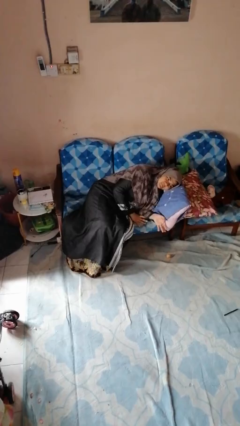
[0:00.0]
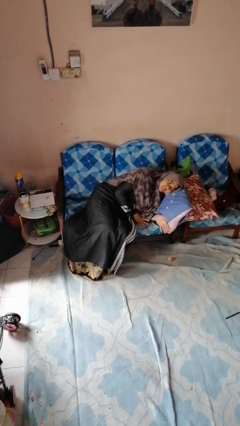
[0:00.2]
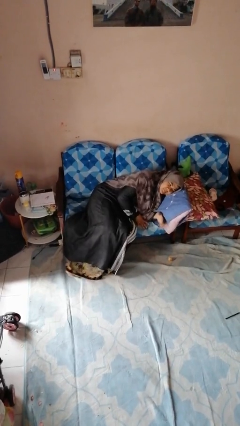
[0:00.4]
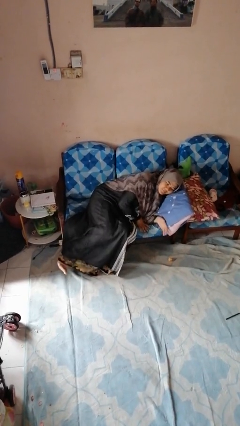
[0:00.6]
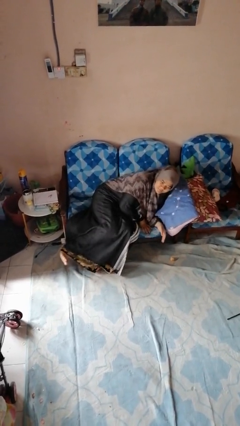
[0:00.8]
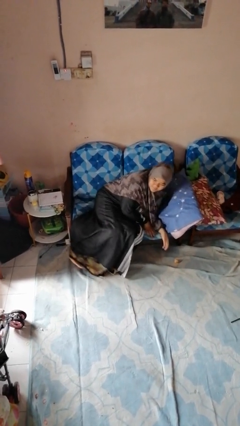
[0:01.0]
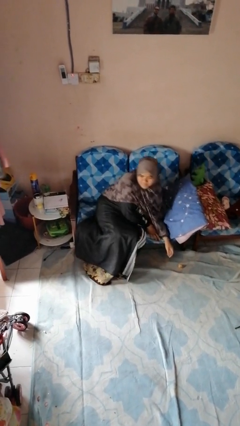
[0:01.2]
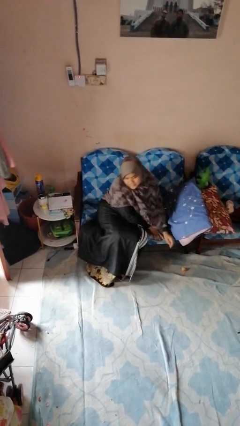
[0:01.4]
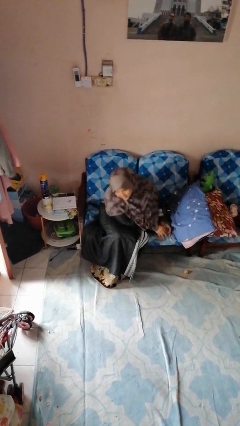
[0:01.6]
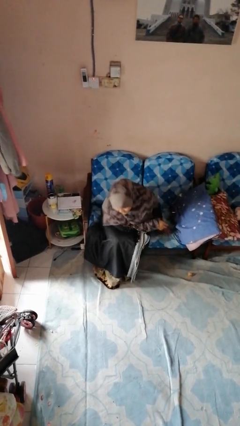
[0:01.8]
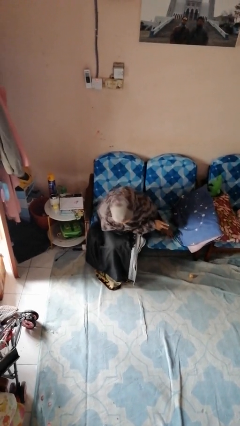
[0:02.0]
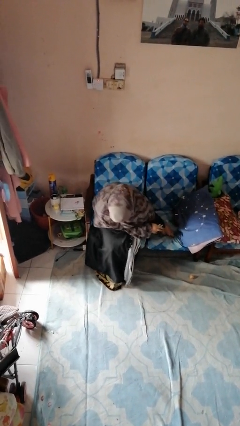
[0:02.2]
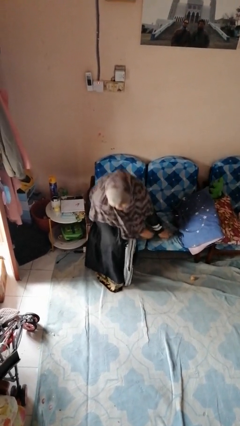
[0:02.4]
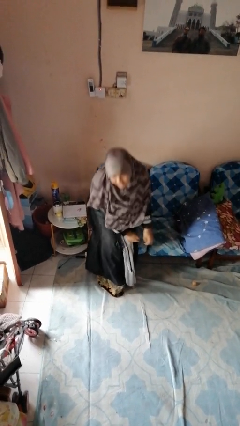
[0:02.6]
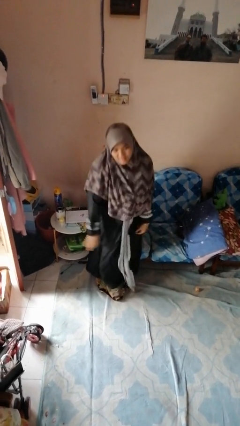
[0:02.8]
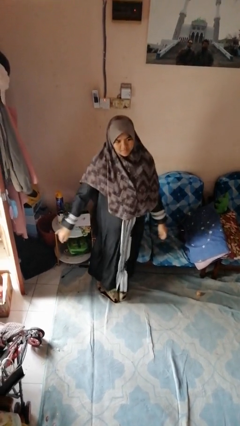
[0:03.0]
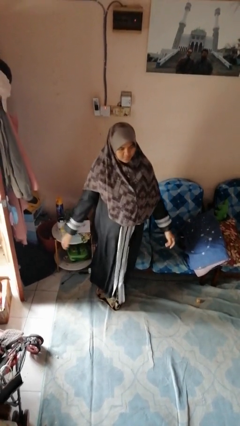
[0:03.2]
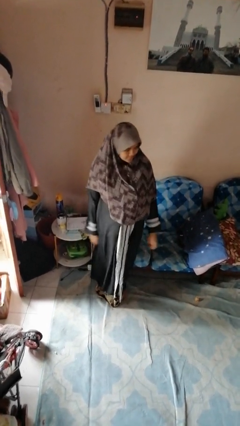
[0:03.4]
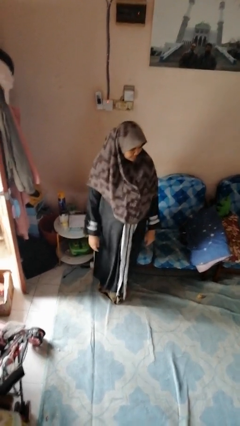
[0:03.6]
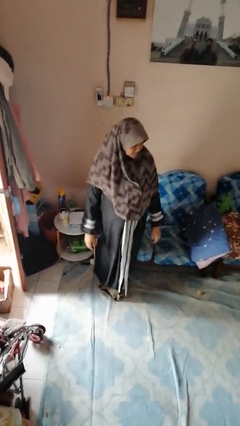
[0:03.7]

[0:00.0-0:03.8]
person stands up

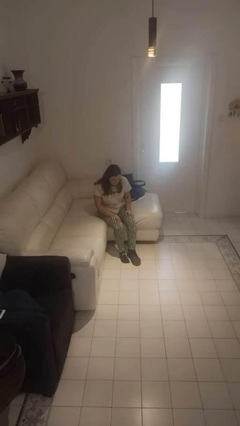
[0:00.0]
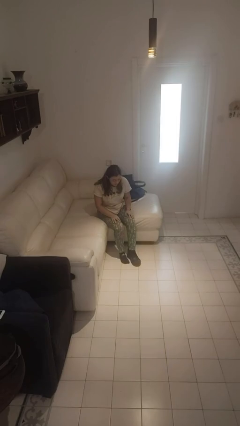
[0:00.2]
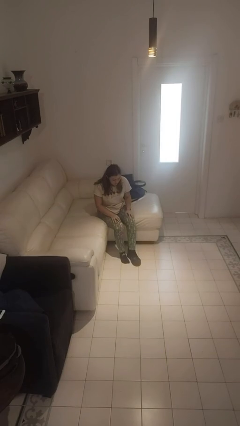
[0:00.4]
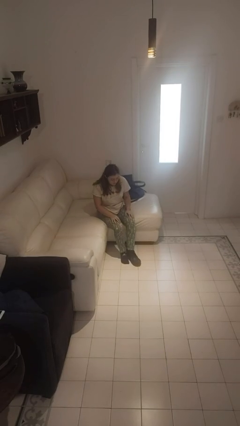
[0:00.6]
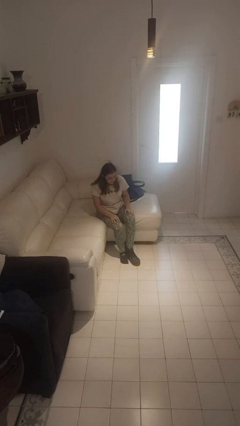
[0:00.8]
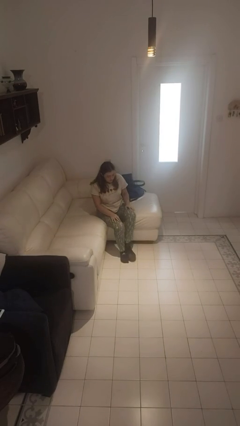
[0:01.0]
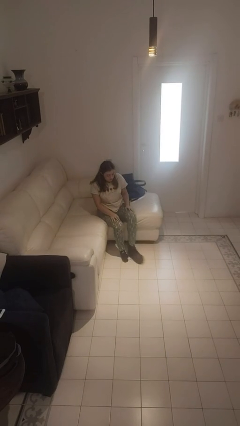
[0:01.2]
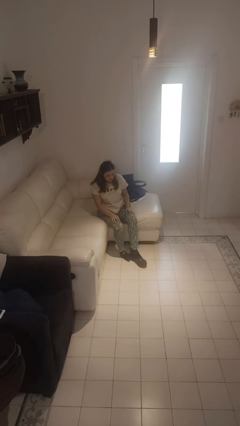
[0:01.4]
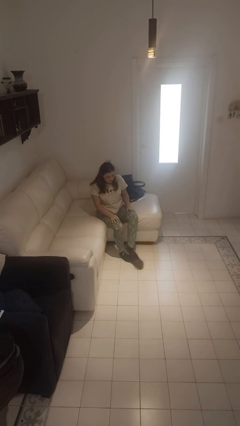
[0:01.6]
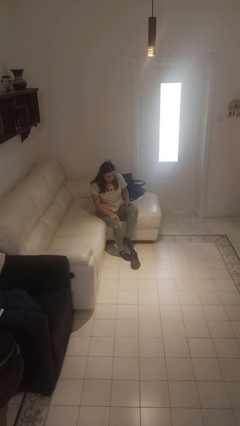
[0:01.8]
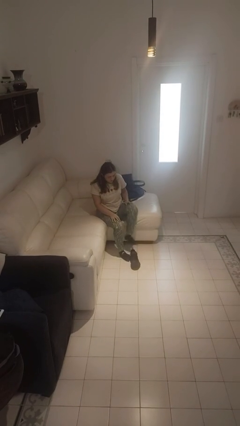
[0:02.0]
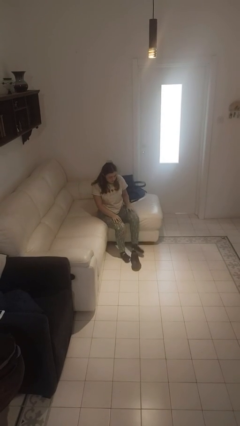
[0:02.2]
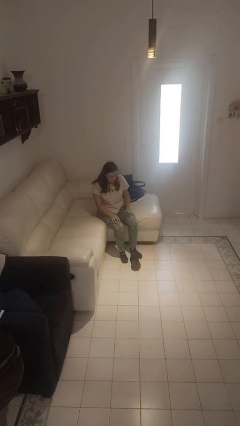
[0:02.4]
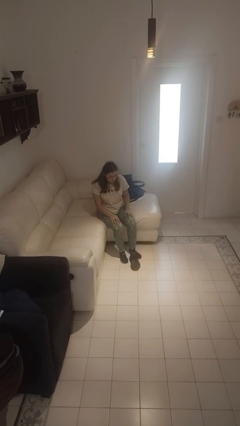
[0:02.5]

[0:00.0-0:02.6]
person takes off shoes

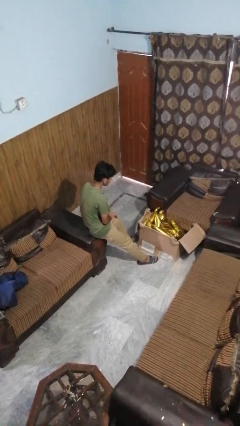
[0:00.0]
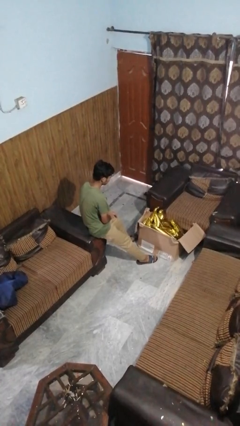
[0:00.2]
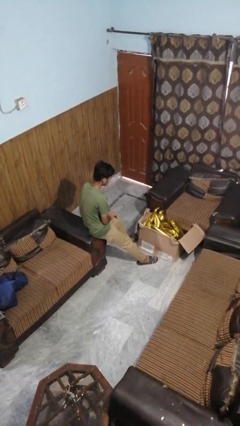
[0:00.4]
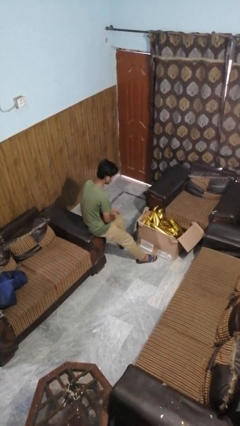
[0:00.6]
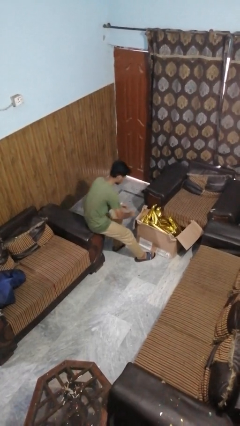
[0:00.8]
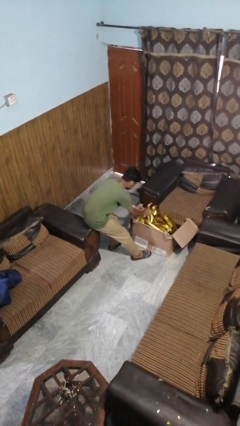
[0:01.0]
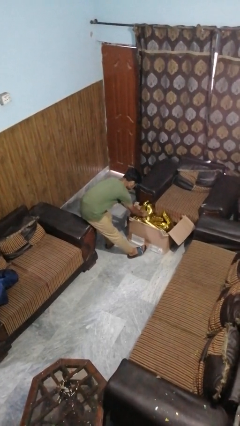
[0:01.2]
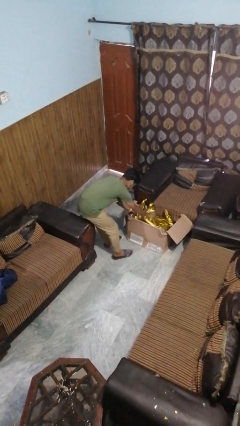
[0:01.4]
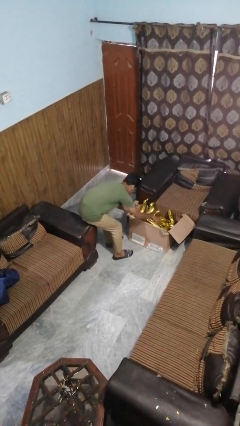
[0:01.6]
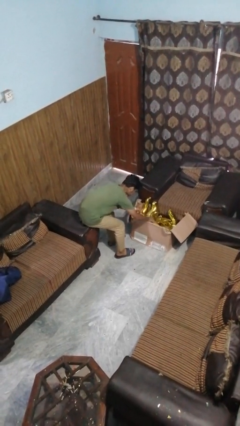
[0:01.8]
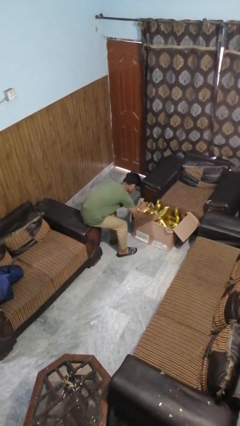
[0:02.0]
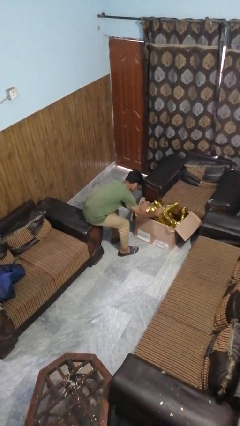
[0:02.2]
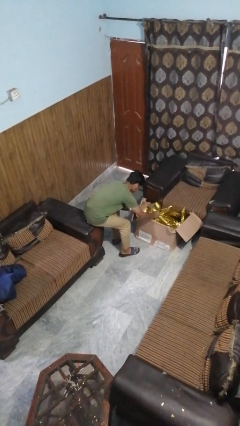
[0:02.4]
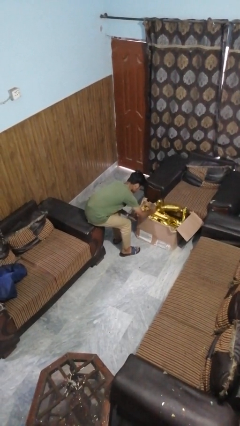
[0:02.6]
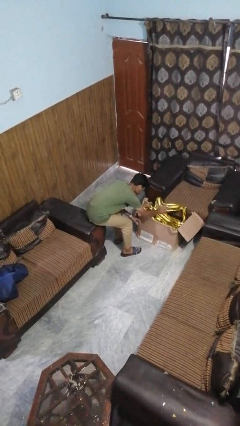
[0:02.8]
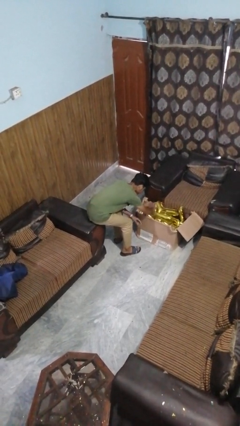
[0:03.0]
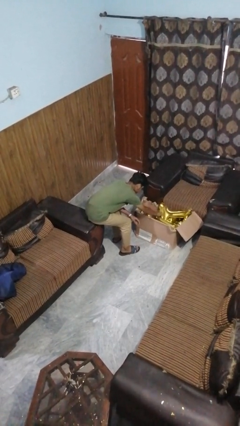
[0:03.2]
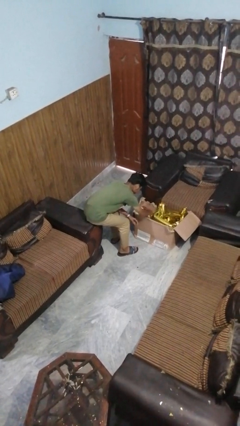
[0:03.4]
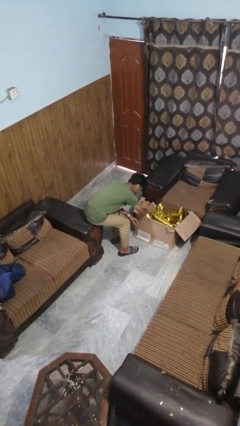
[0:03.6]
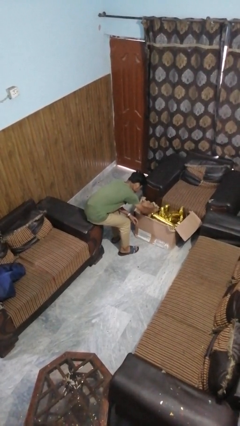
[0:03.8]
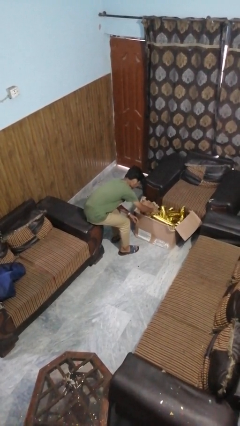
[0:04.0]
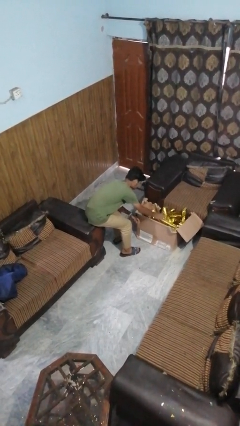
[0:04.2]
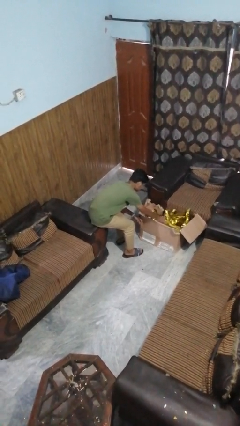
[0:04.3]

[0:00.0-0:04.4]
person searches in box

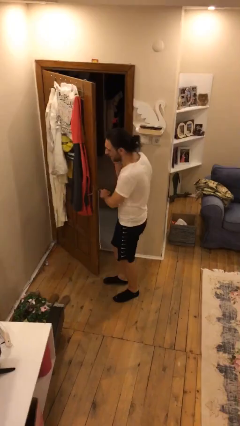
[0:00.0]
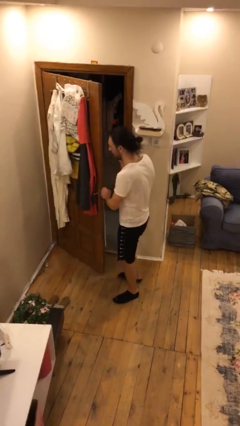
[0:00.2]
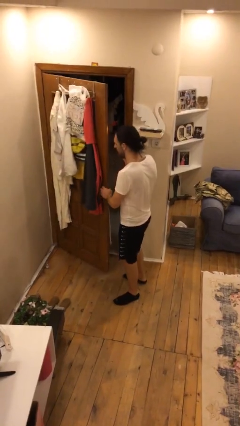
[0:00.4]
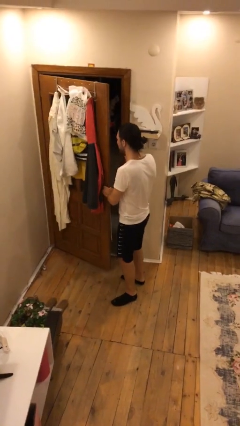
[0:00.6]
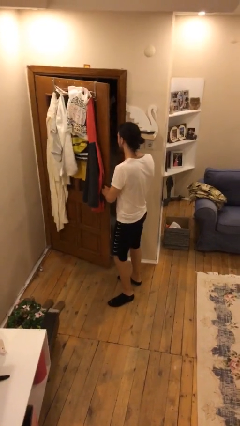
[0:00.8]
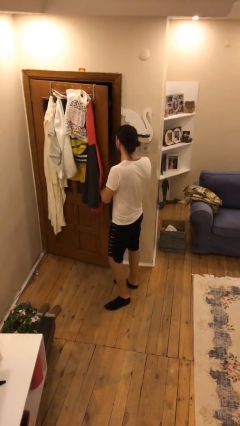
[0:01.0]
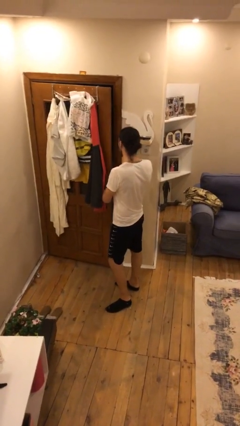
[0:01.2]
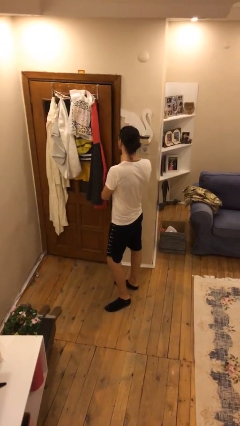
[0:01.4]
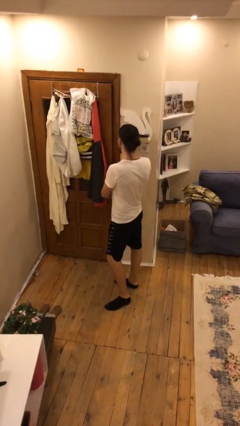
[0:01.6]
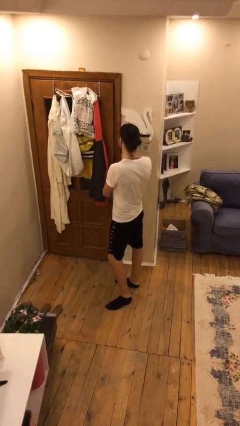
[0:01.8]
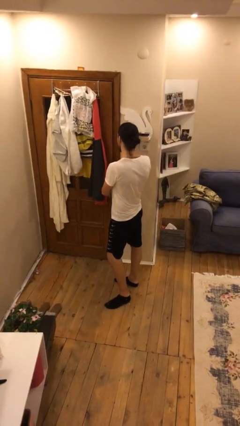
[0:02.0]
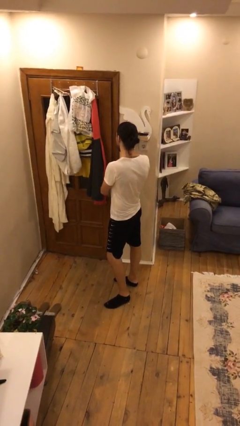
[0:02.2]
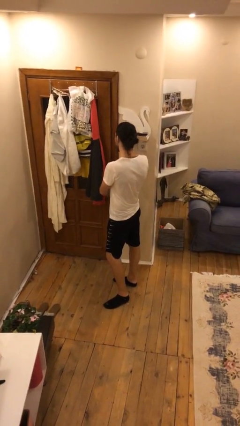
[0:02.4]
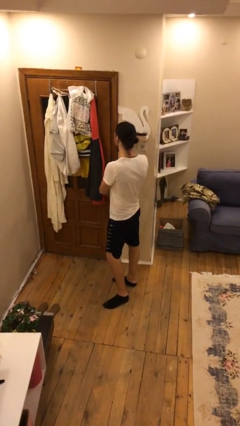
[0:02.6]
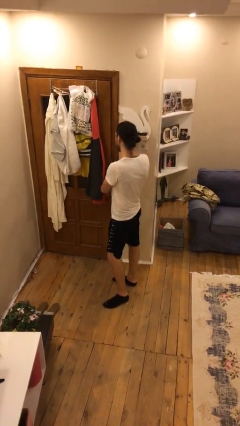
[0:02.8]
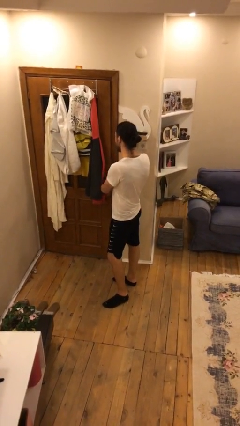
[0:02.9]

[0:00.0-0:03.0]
person closes facility door

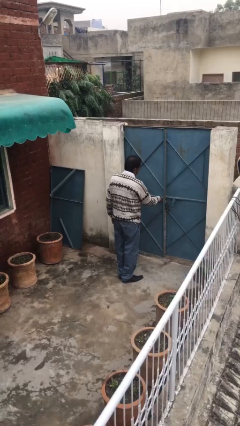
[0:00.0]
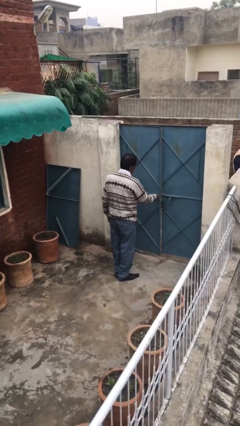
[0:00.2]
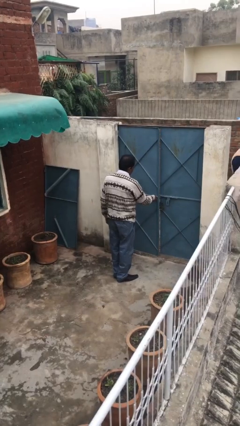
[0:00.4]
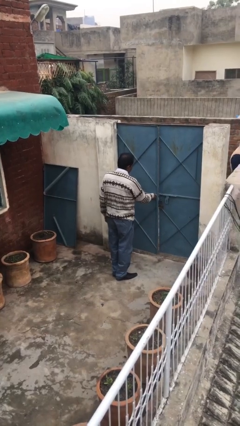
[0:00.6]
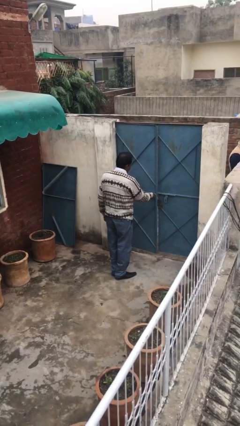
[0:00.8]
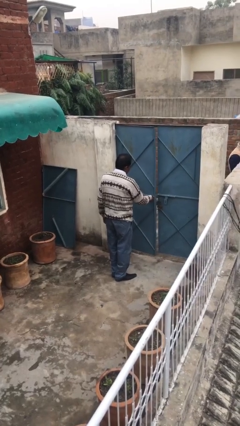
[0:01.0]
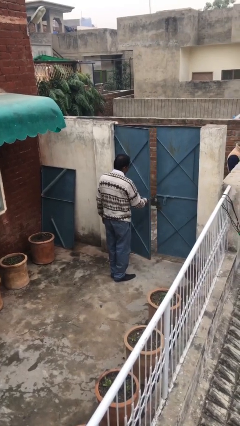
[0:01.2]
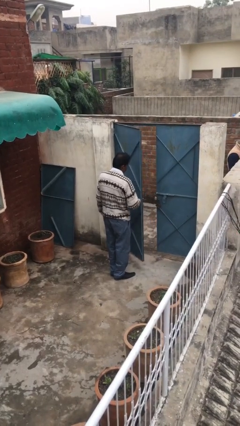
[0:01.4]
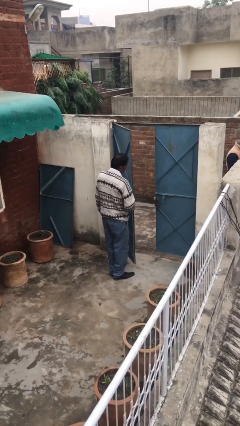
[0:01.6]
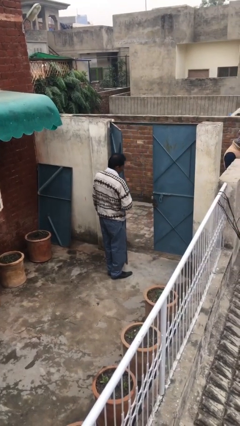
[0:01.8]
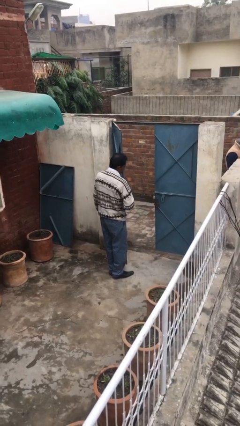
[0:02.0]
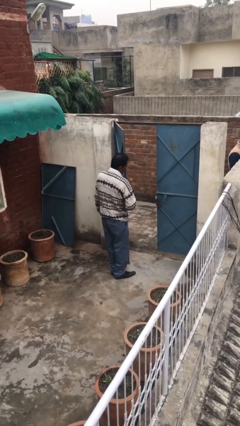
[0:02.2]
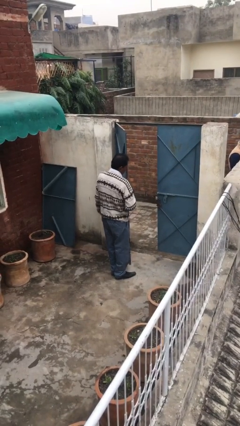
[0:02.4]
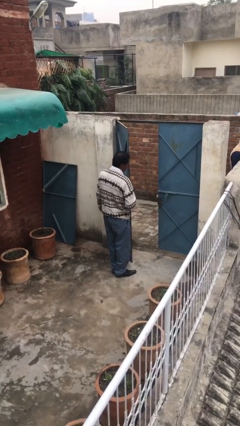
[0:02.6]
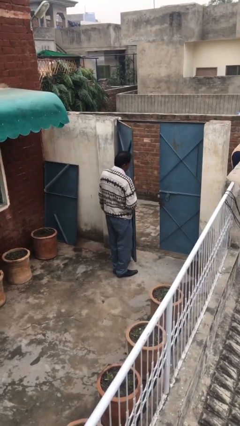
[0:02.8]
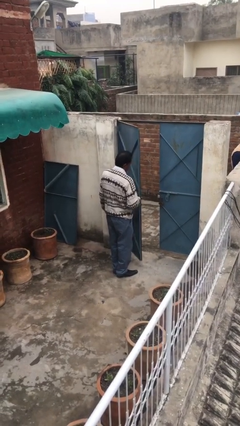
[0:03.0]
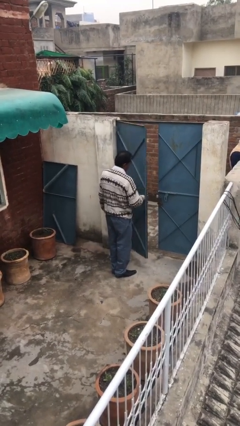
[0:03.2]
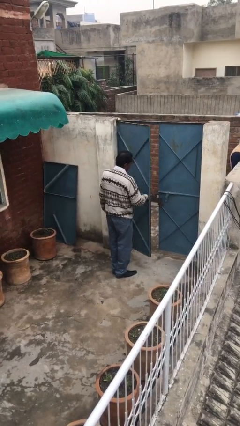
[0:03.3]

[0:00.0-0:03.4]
person opens facility door
